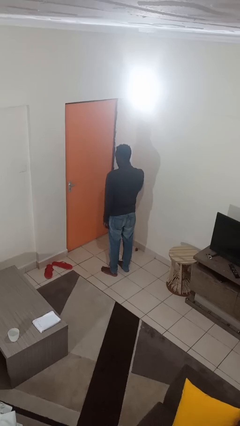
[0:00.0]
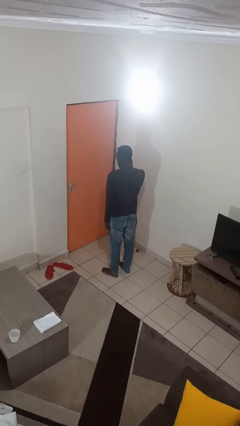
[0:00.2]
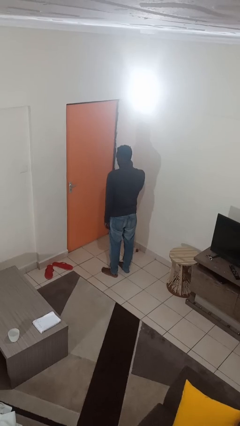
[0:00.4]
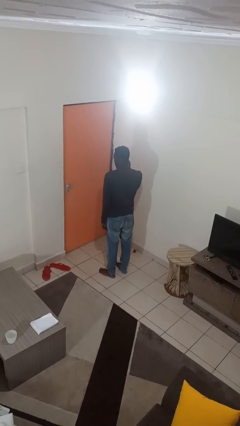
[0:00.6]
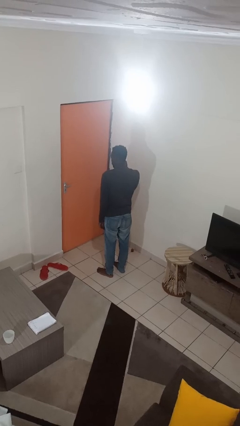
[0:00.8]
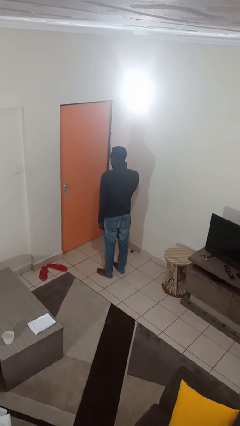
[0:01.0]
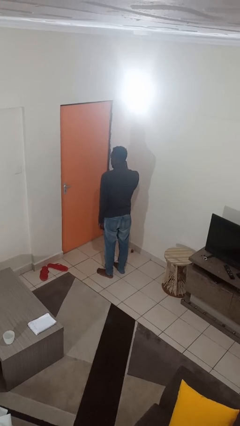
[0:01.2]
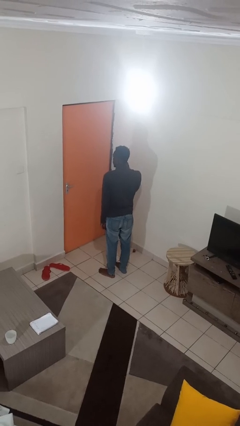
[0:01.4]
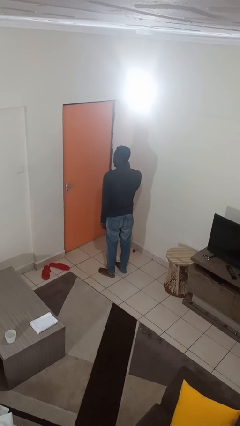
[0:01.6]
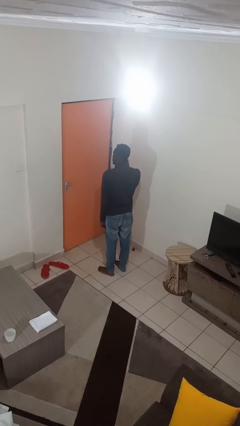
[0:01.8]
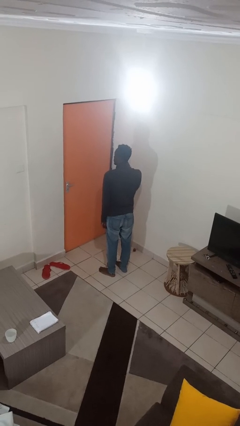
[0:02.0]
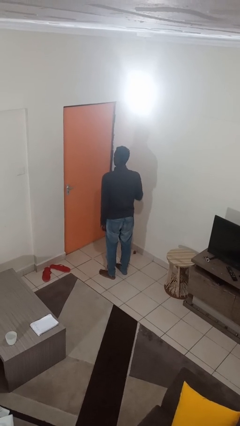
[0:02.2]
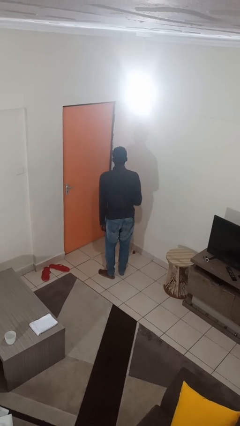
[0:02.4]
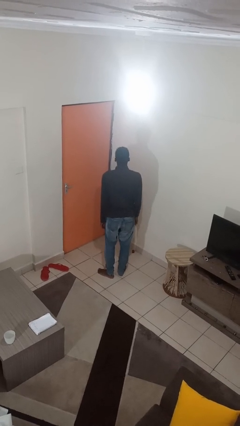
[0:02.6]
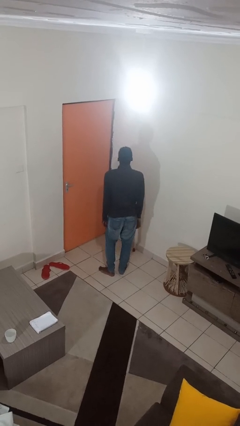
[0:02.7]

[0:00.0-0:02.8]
person touches earlobe

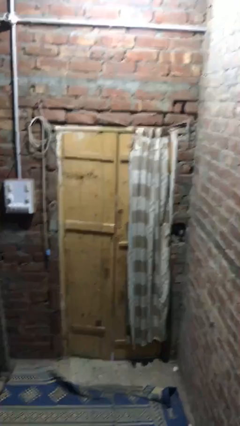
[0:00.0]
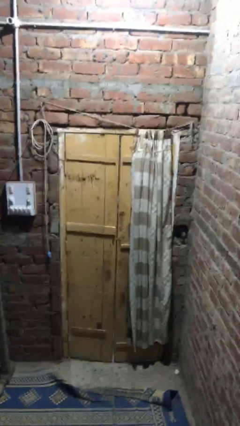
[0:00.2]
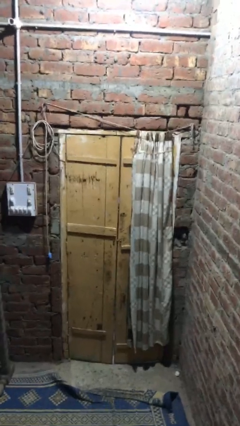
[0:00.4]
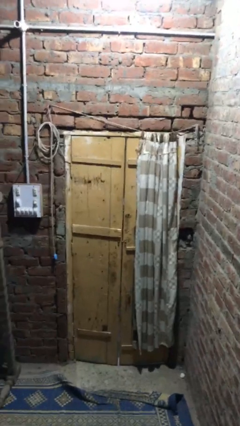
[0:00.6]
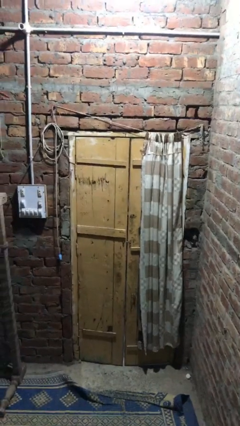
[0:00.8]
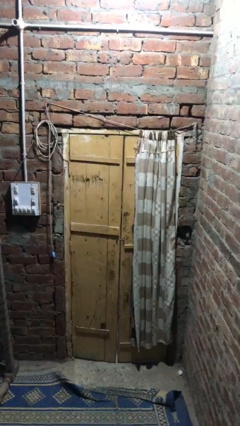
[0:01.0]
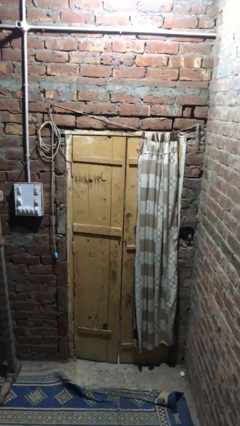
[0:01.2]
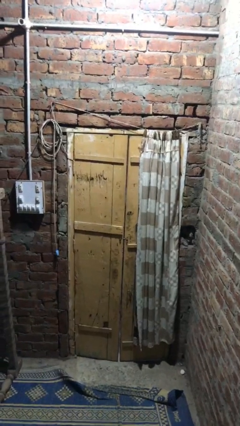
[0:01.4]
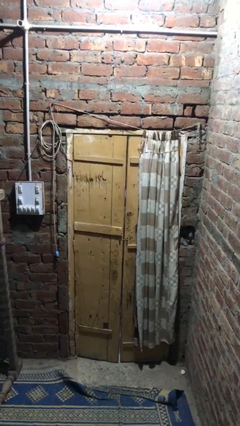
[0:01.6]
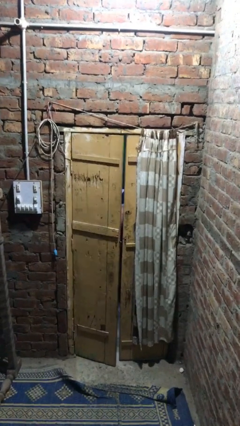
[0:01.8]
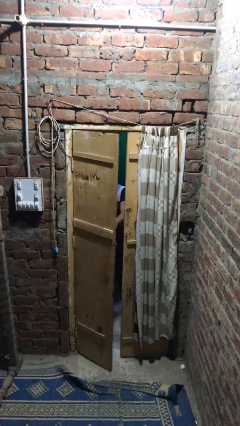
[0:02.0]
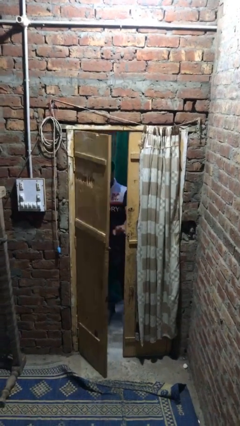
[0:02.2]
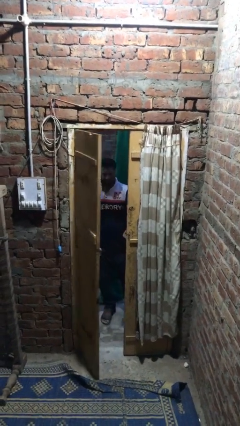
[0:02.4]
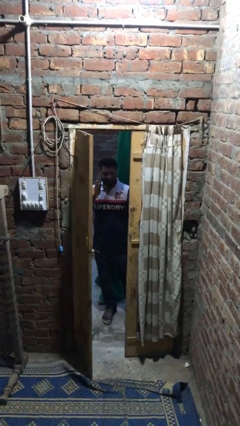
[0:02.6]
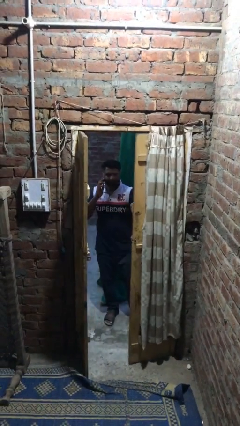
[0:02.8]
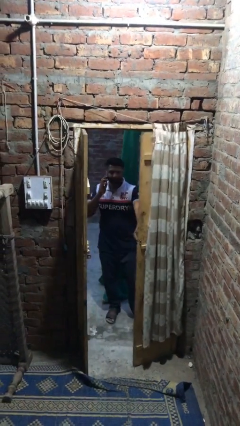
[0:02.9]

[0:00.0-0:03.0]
person opens facility door

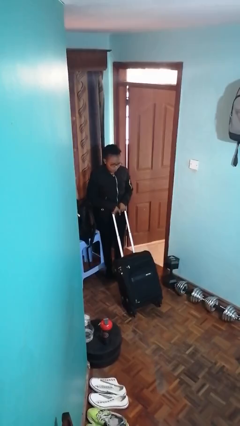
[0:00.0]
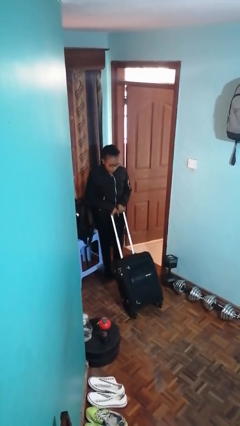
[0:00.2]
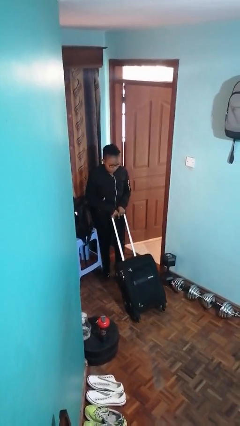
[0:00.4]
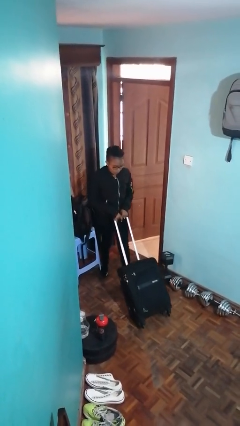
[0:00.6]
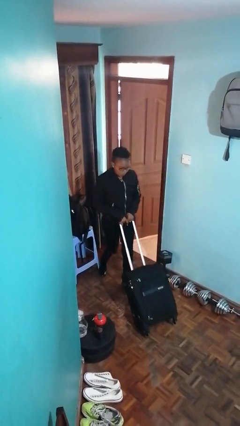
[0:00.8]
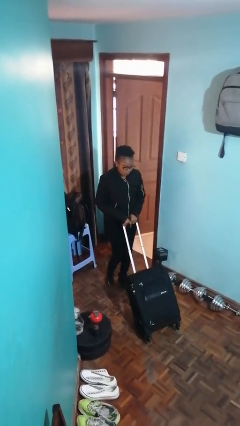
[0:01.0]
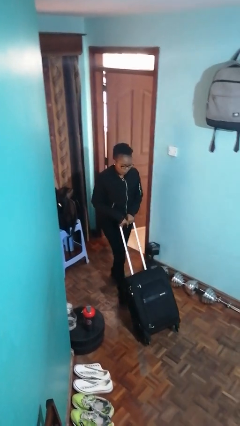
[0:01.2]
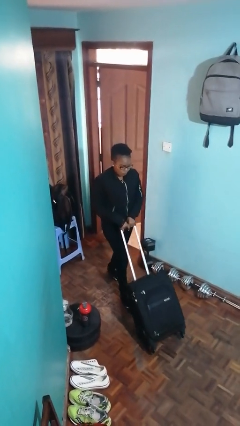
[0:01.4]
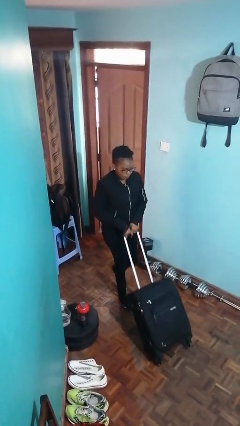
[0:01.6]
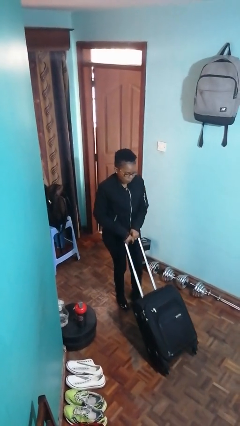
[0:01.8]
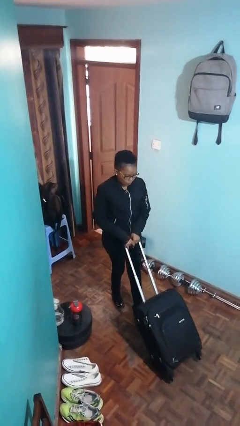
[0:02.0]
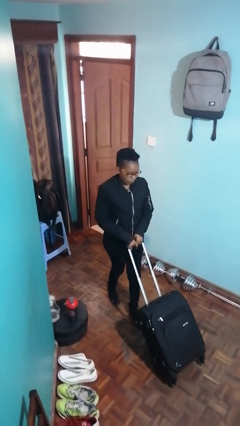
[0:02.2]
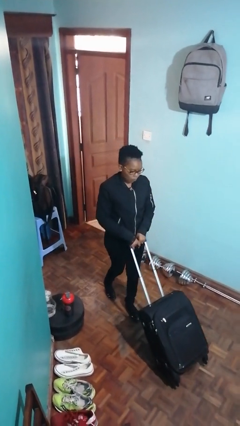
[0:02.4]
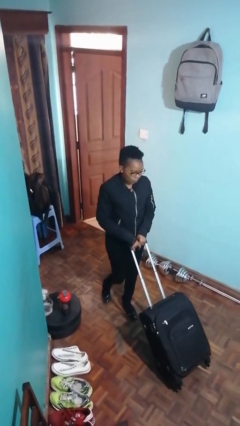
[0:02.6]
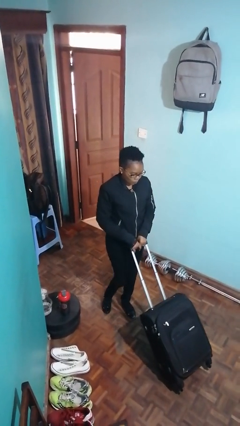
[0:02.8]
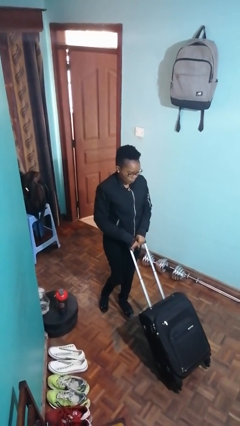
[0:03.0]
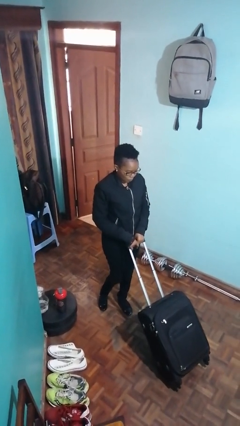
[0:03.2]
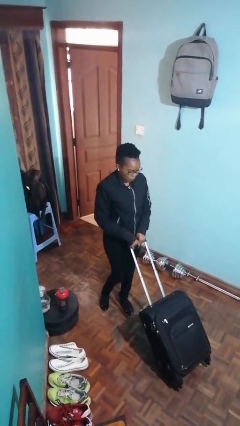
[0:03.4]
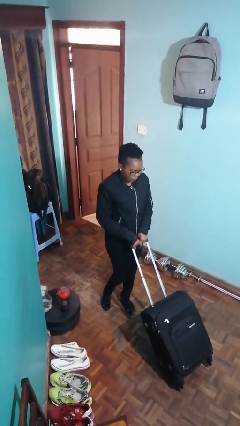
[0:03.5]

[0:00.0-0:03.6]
person pushes wheeled cart

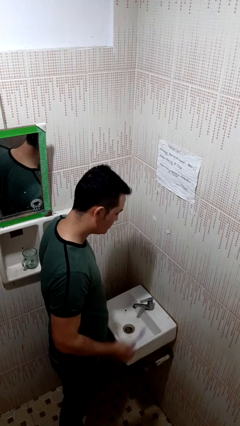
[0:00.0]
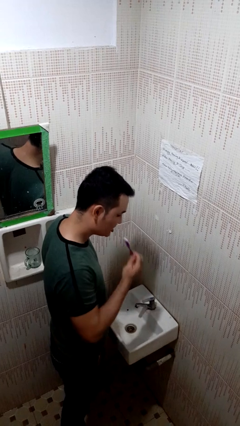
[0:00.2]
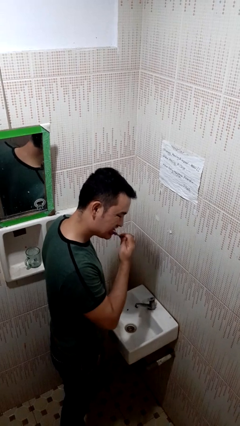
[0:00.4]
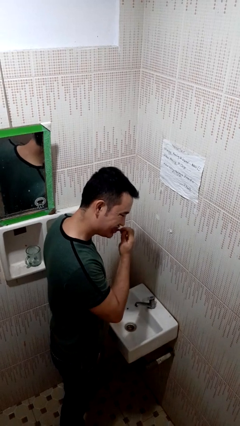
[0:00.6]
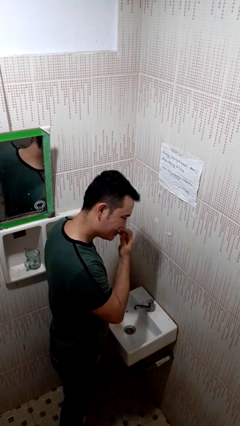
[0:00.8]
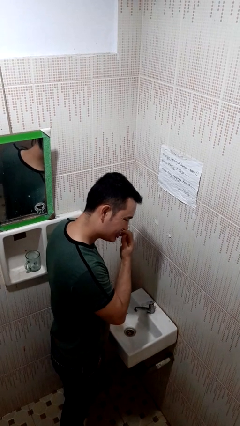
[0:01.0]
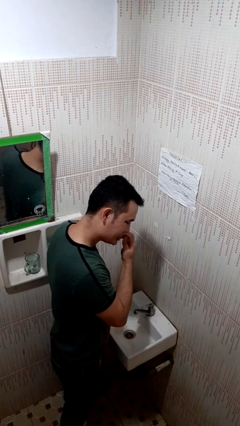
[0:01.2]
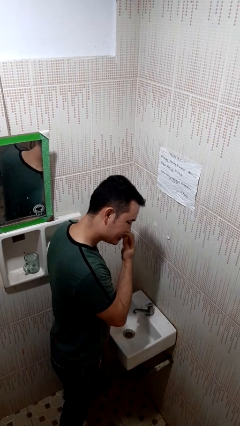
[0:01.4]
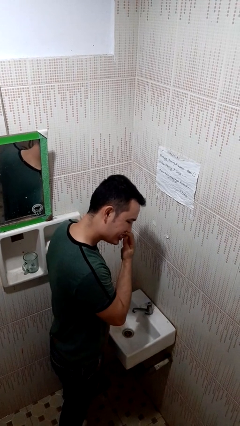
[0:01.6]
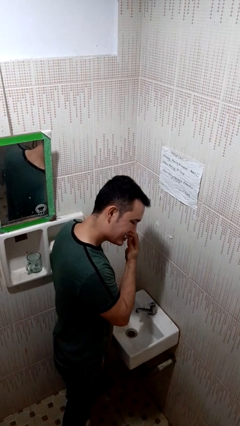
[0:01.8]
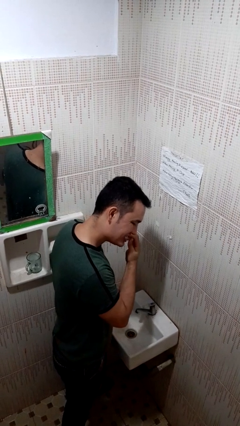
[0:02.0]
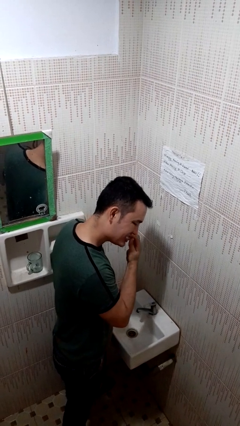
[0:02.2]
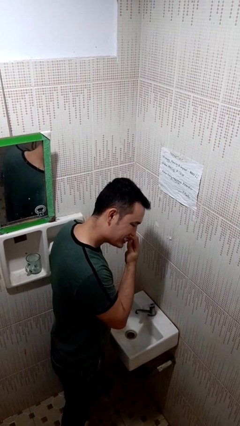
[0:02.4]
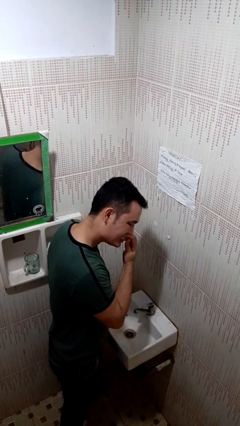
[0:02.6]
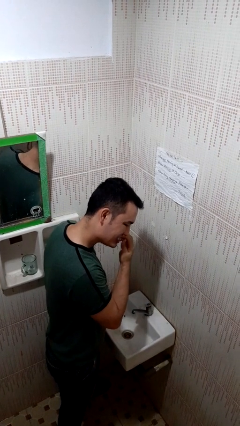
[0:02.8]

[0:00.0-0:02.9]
person brushes teeth

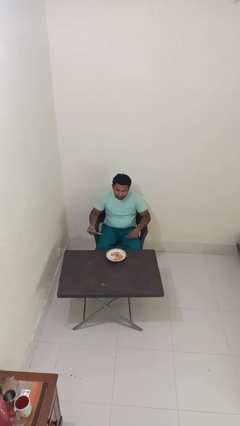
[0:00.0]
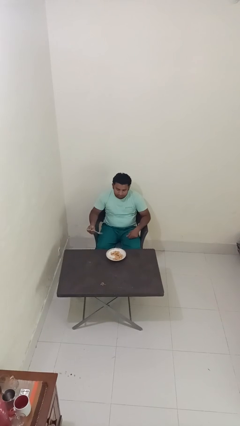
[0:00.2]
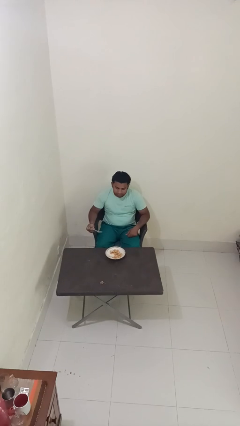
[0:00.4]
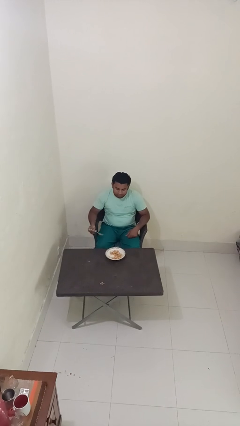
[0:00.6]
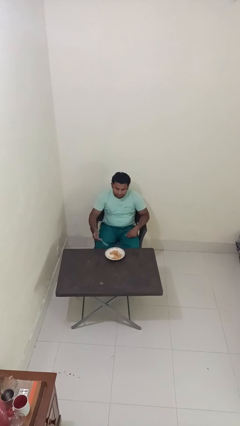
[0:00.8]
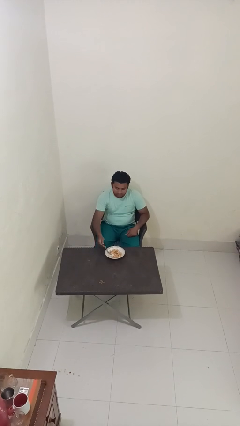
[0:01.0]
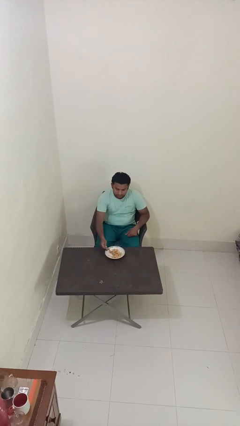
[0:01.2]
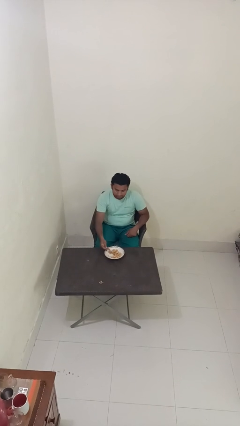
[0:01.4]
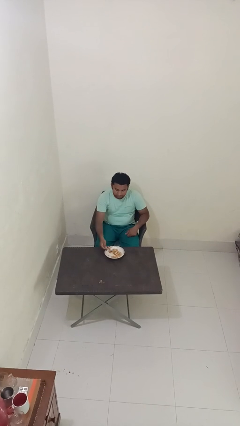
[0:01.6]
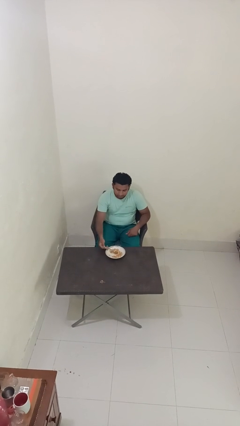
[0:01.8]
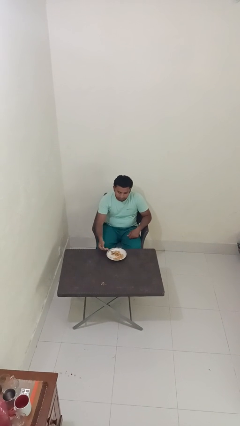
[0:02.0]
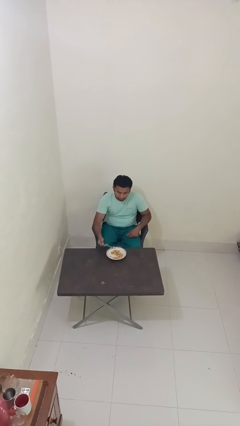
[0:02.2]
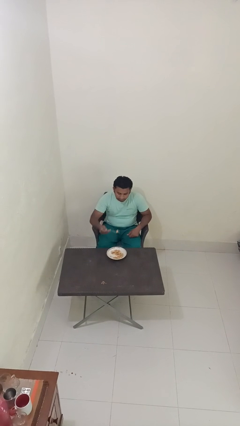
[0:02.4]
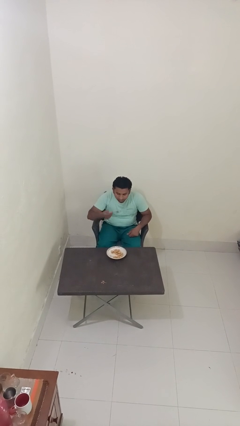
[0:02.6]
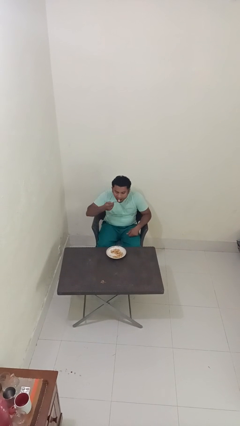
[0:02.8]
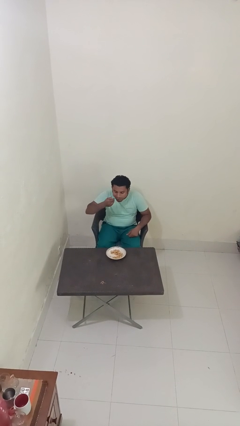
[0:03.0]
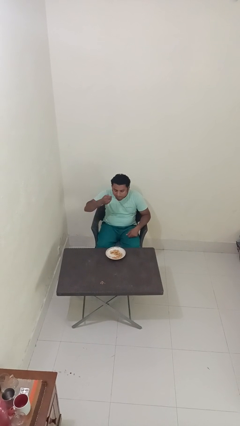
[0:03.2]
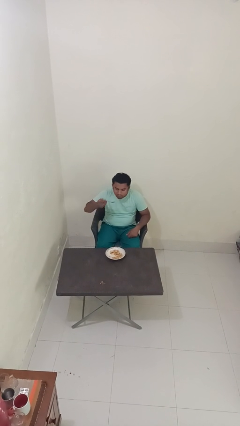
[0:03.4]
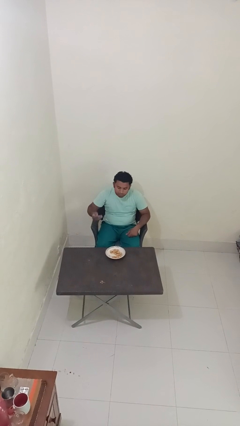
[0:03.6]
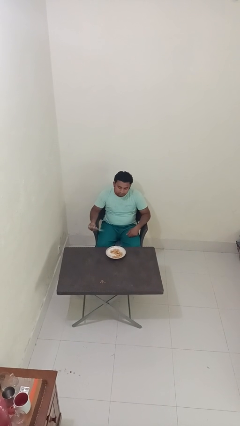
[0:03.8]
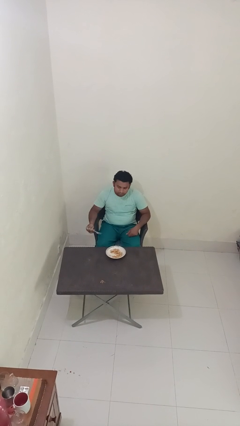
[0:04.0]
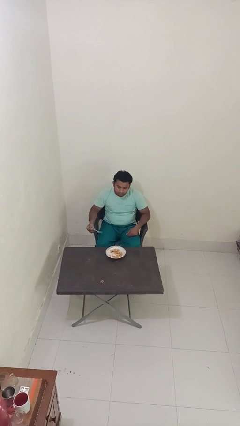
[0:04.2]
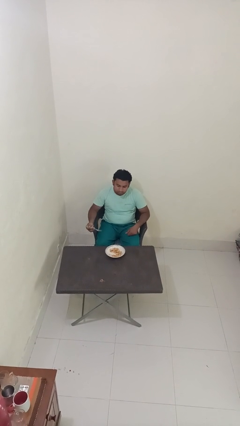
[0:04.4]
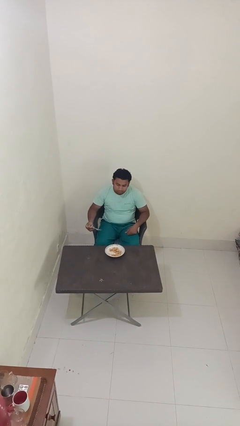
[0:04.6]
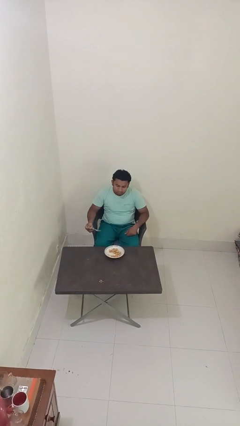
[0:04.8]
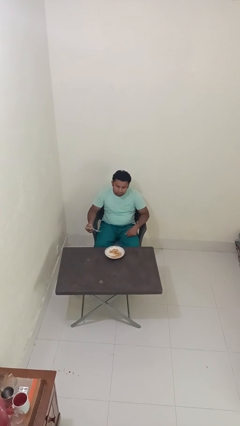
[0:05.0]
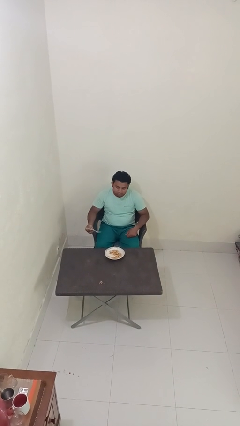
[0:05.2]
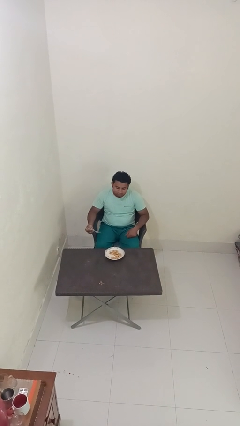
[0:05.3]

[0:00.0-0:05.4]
person eats with utensil
